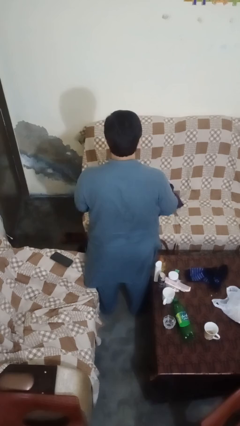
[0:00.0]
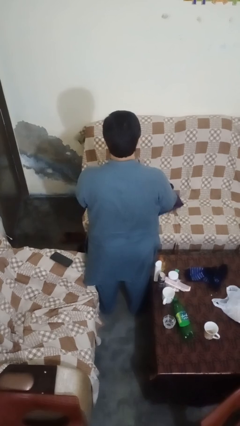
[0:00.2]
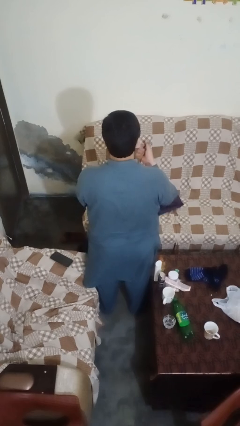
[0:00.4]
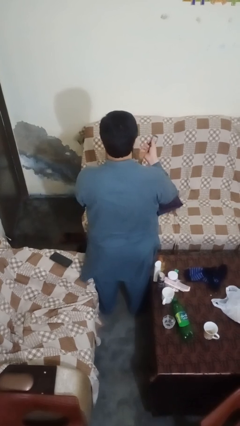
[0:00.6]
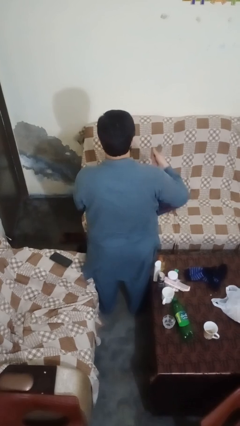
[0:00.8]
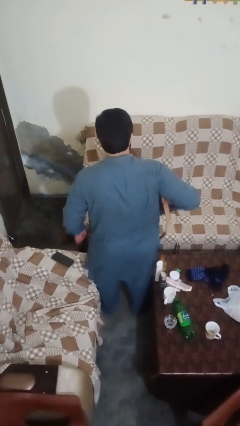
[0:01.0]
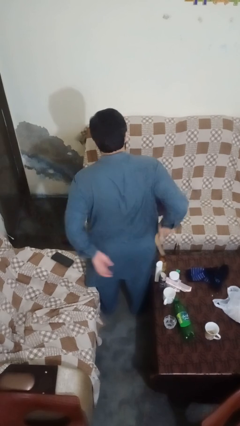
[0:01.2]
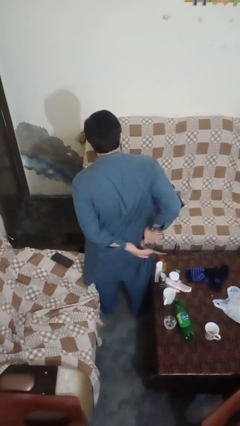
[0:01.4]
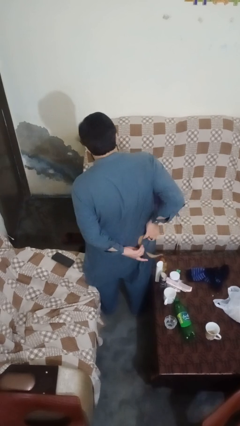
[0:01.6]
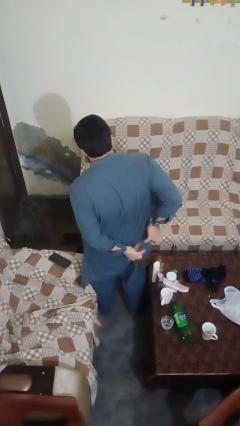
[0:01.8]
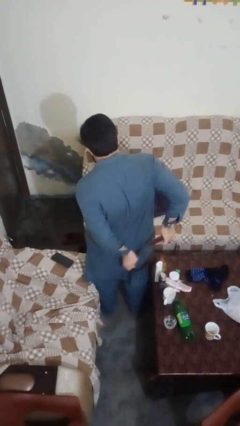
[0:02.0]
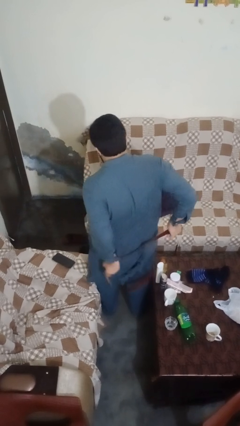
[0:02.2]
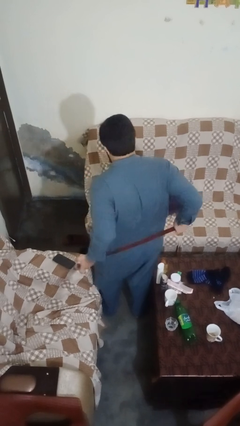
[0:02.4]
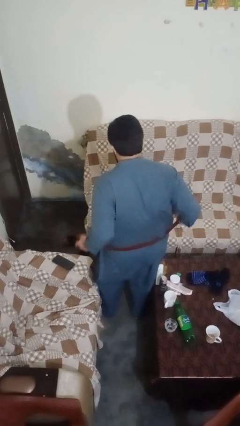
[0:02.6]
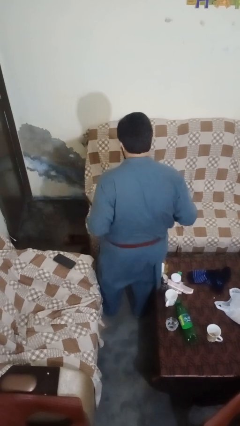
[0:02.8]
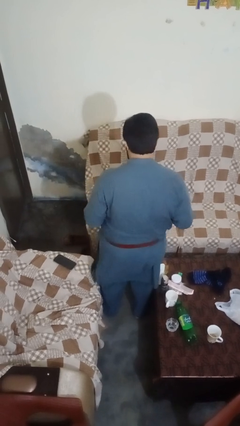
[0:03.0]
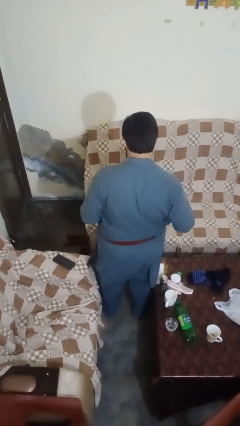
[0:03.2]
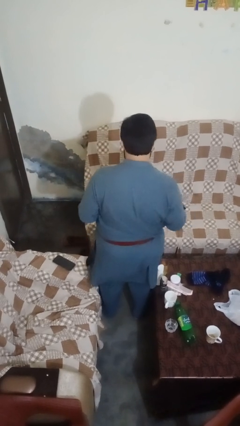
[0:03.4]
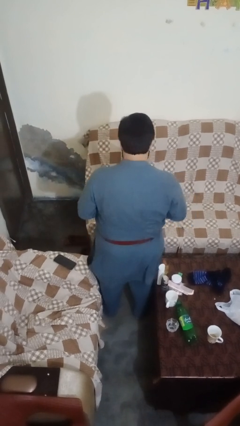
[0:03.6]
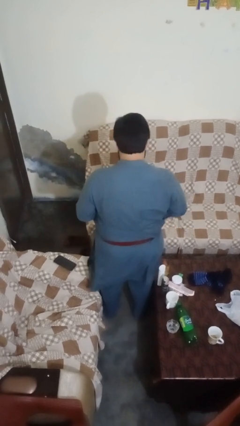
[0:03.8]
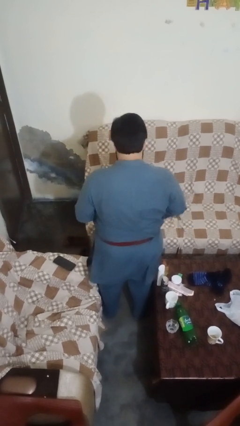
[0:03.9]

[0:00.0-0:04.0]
person puts on belt

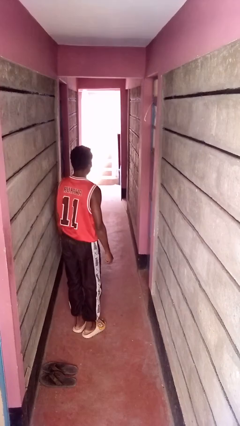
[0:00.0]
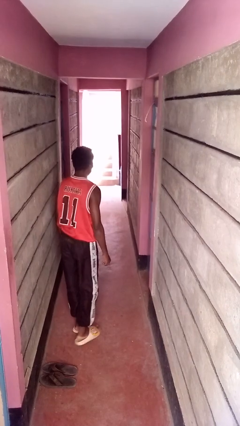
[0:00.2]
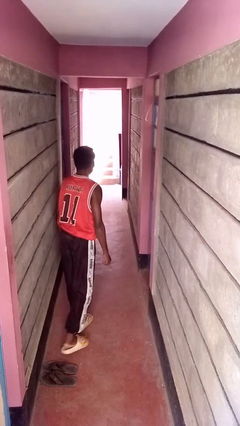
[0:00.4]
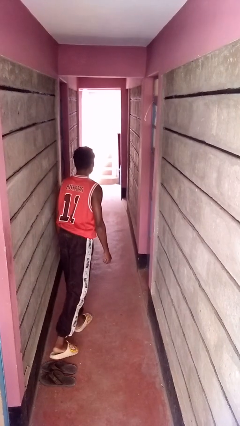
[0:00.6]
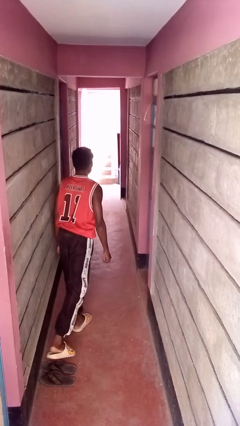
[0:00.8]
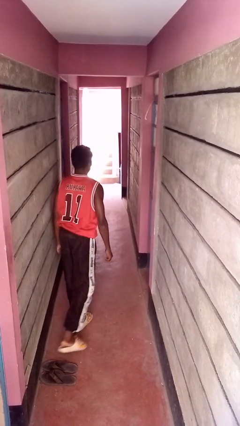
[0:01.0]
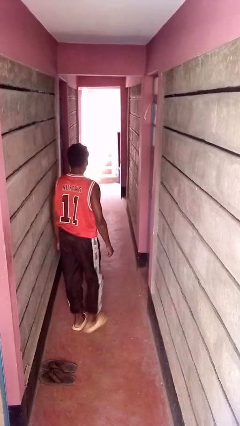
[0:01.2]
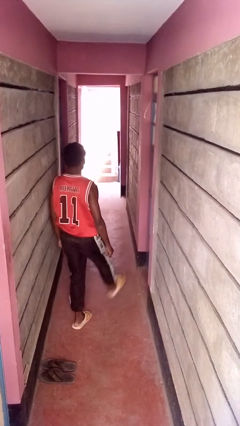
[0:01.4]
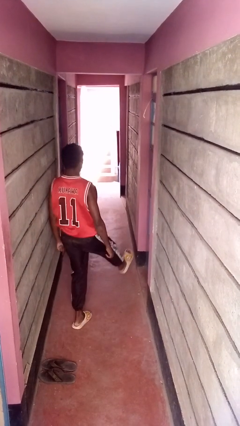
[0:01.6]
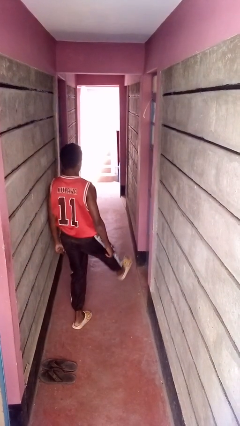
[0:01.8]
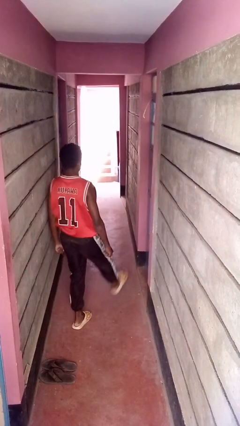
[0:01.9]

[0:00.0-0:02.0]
person wiggles hips

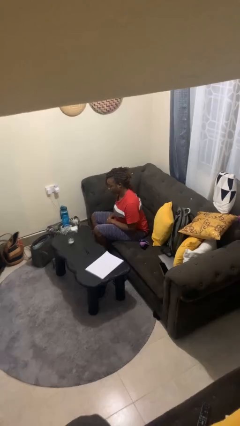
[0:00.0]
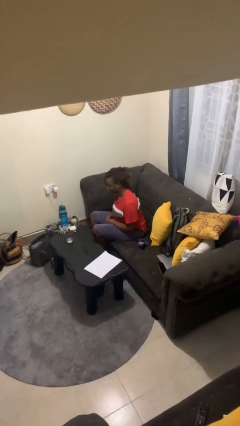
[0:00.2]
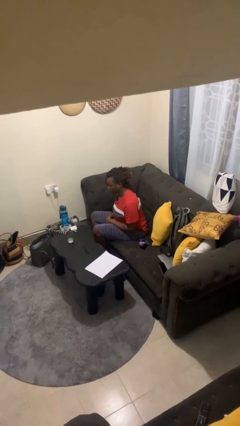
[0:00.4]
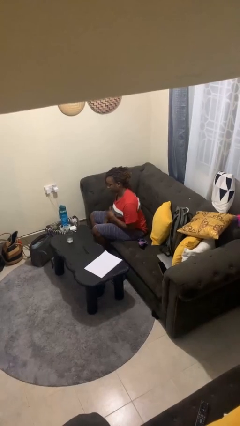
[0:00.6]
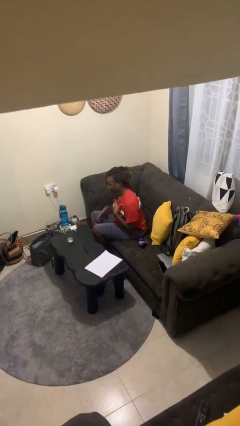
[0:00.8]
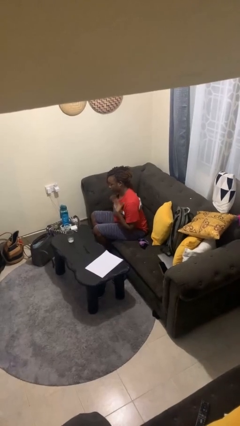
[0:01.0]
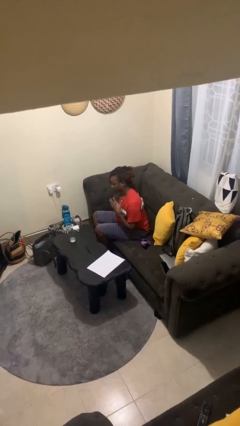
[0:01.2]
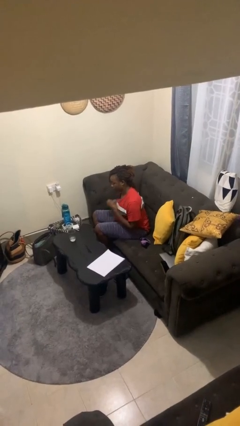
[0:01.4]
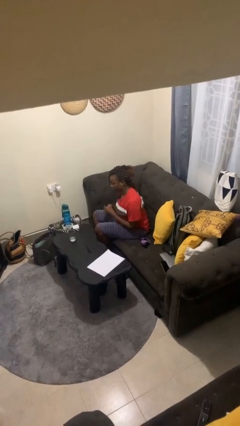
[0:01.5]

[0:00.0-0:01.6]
person drums on chest

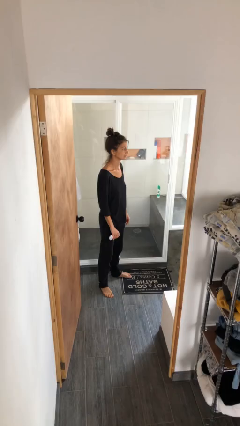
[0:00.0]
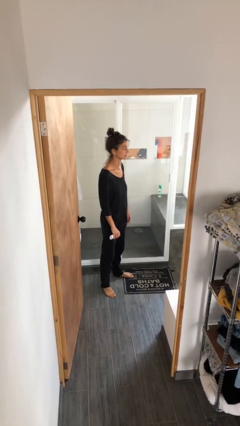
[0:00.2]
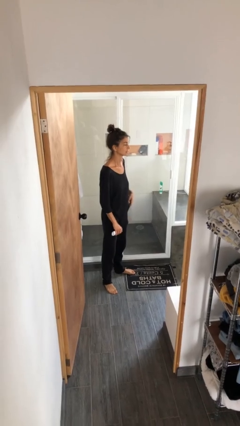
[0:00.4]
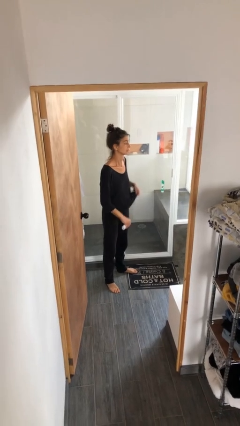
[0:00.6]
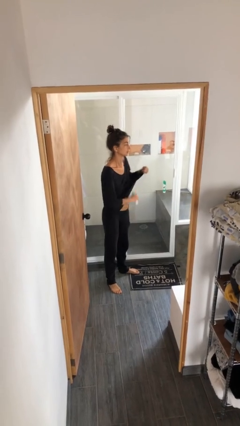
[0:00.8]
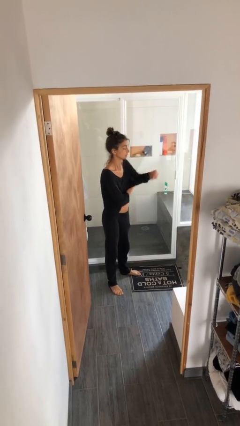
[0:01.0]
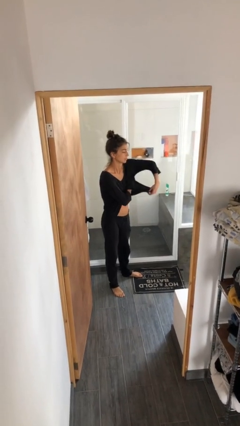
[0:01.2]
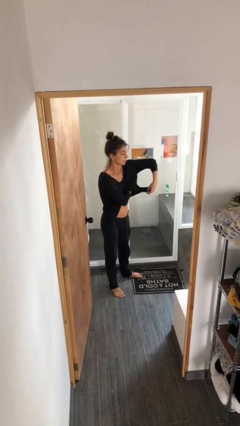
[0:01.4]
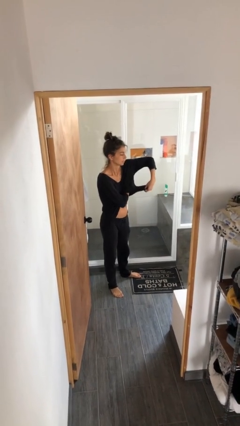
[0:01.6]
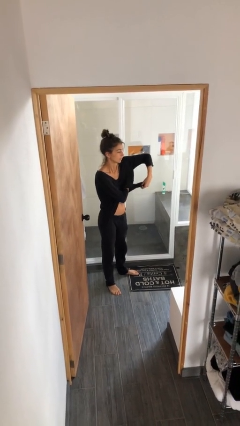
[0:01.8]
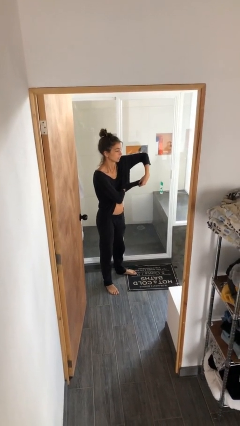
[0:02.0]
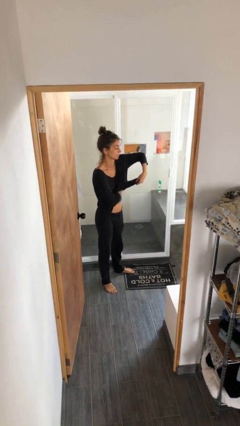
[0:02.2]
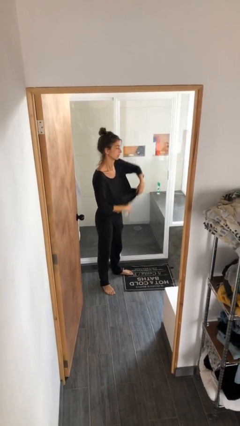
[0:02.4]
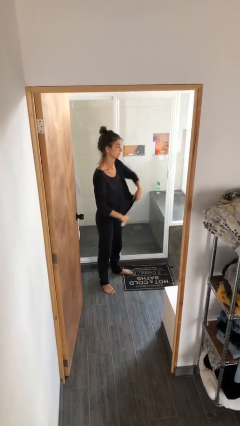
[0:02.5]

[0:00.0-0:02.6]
person applies deodorant

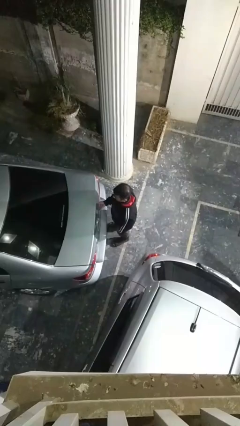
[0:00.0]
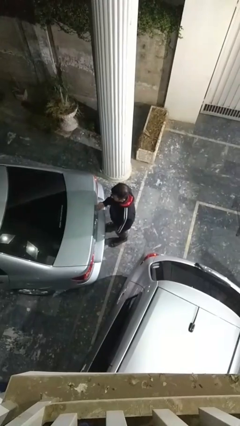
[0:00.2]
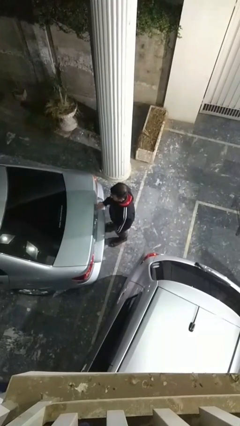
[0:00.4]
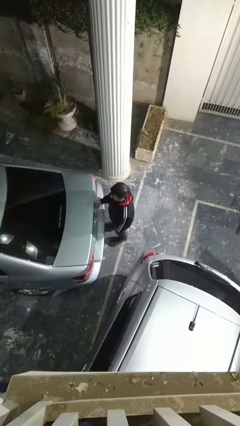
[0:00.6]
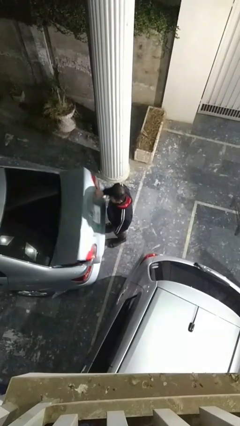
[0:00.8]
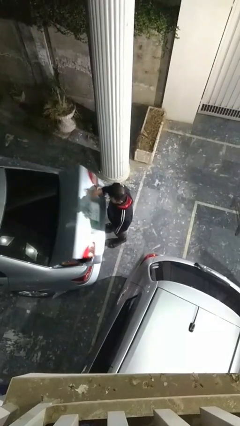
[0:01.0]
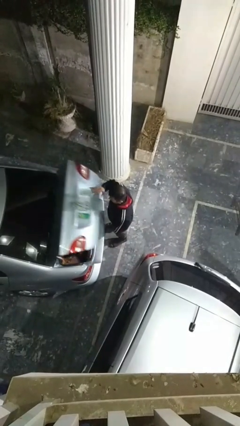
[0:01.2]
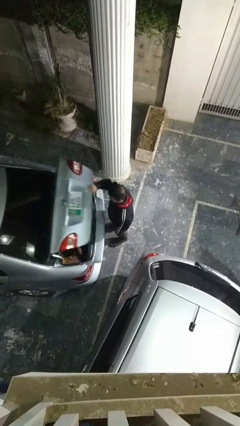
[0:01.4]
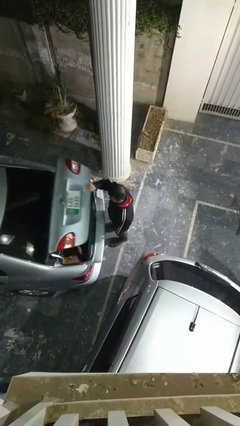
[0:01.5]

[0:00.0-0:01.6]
person opens car trunk

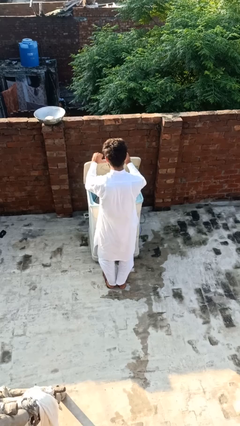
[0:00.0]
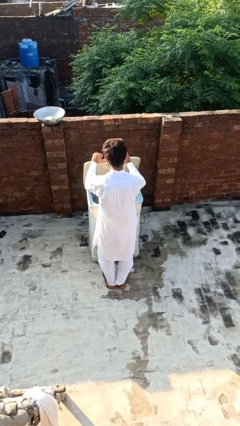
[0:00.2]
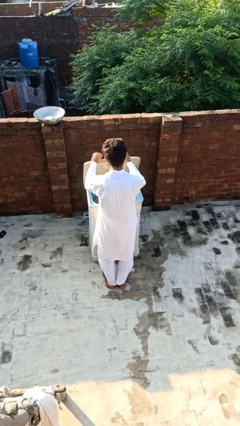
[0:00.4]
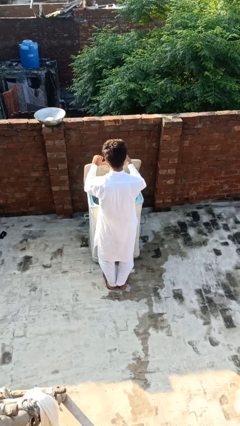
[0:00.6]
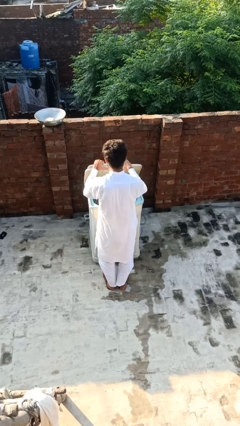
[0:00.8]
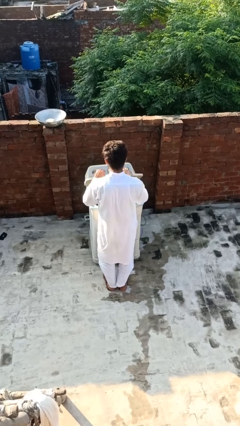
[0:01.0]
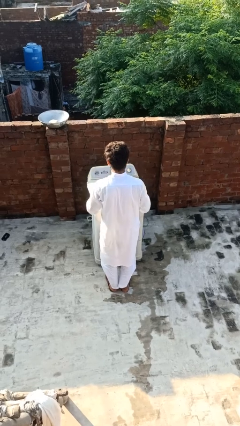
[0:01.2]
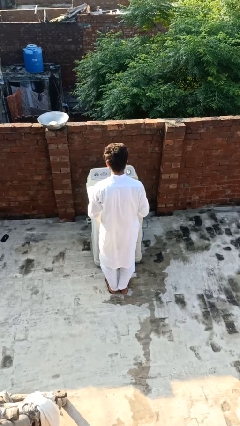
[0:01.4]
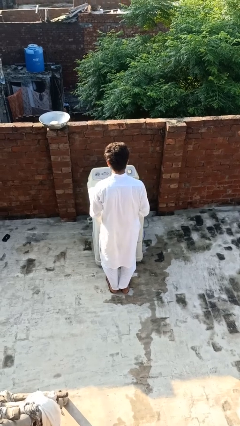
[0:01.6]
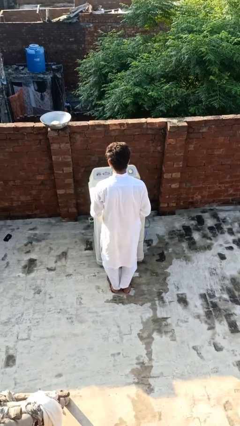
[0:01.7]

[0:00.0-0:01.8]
person closes clothes washer

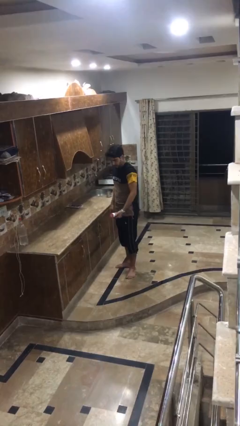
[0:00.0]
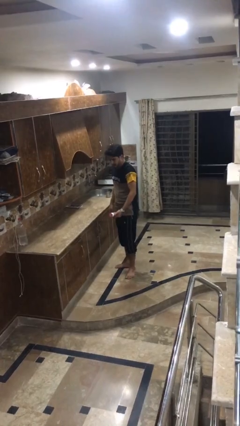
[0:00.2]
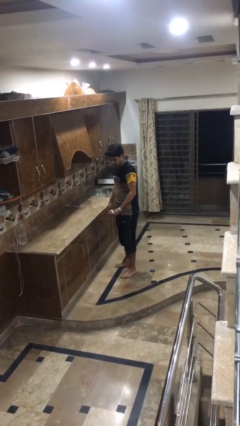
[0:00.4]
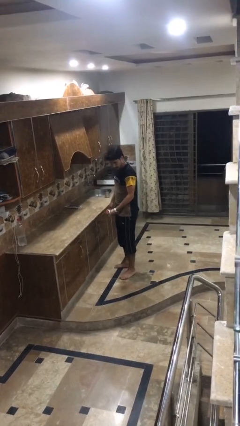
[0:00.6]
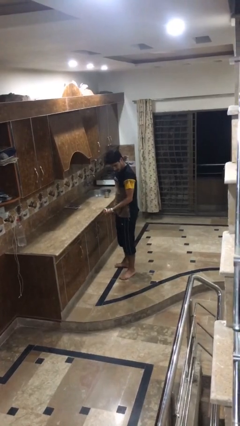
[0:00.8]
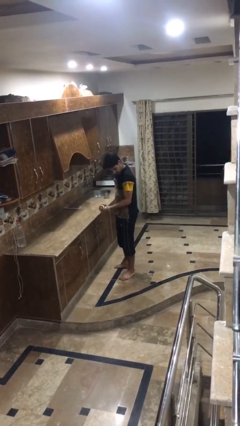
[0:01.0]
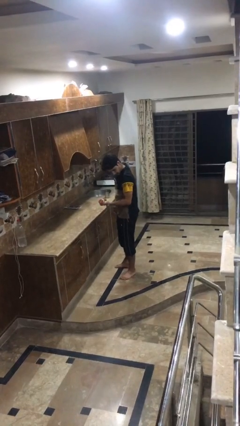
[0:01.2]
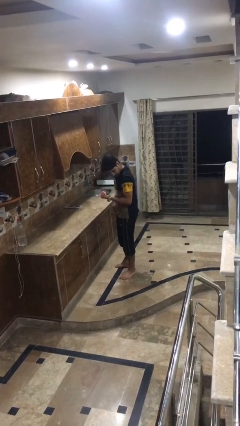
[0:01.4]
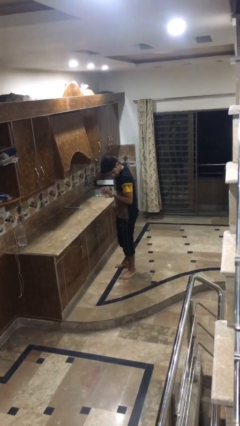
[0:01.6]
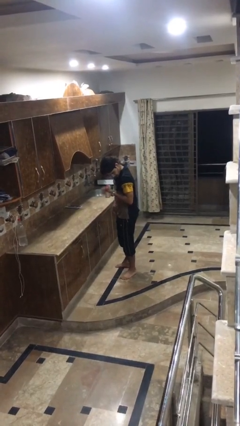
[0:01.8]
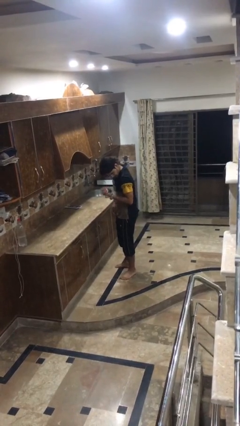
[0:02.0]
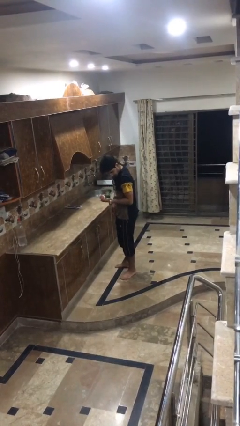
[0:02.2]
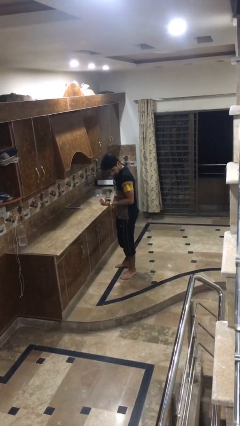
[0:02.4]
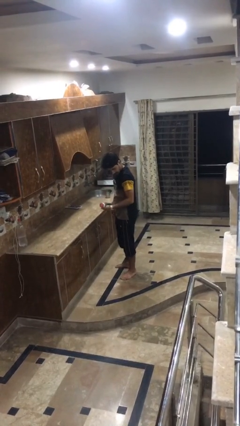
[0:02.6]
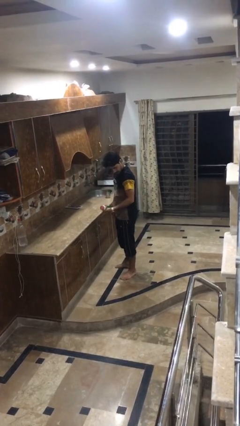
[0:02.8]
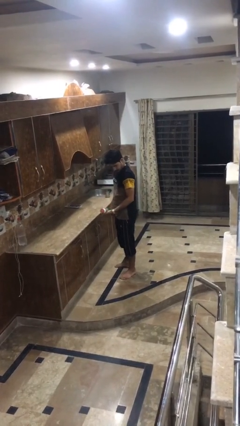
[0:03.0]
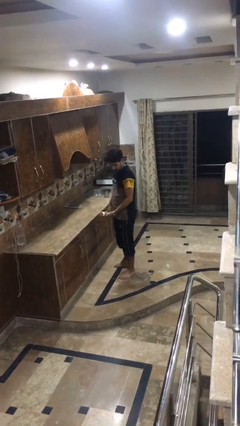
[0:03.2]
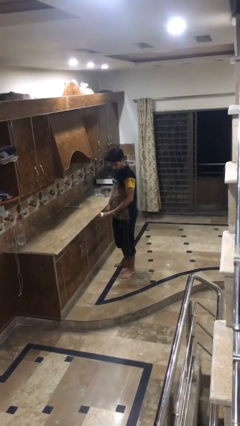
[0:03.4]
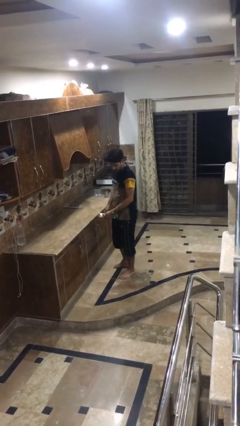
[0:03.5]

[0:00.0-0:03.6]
person lifts dumbbells
